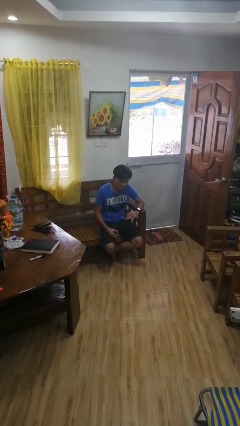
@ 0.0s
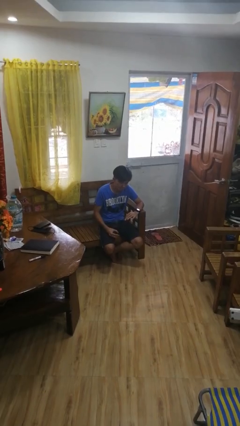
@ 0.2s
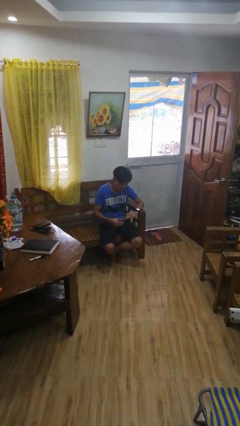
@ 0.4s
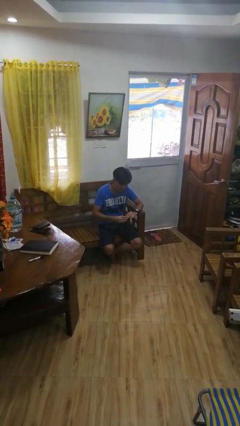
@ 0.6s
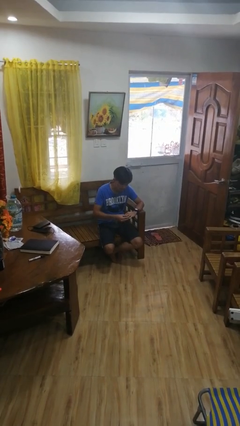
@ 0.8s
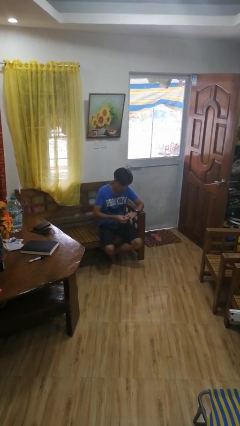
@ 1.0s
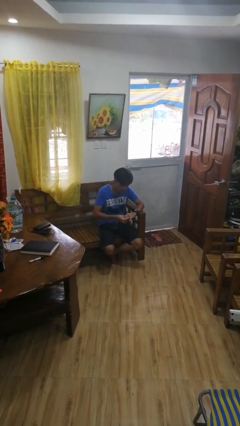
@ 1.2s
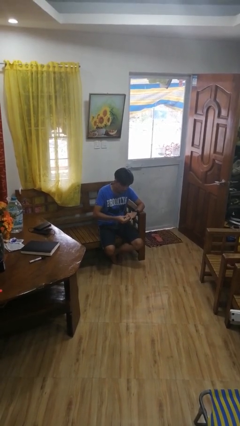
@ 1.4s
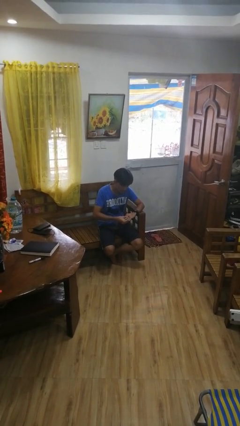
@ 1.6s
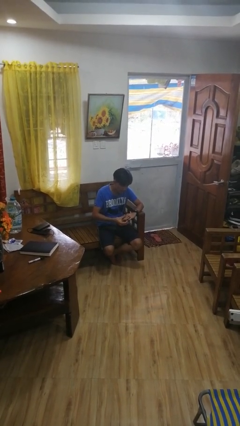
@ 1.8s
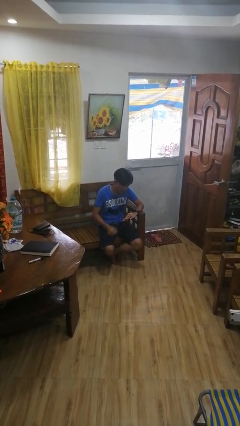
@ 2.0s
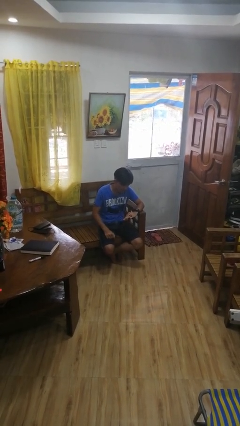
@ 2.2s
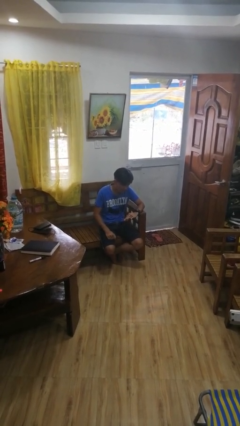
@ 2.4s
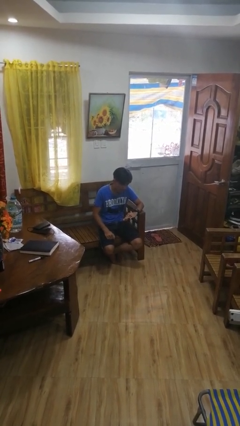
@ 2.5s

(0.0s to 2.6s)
person puts on ring

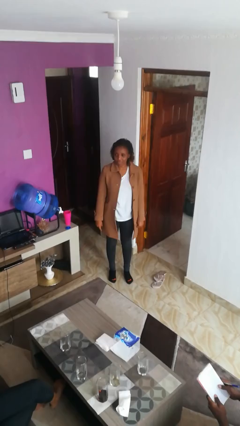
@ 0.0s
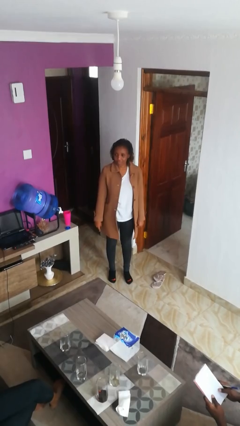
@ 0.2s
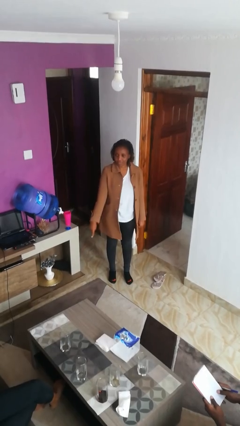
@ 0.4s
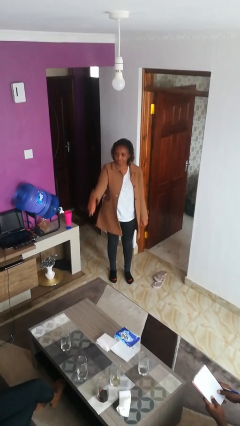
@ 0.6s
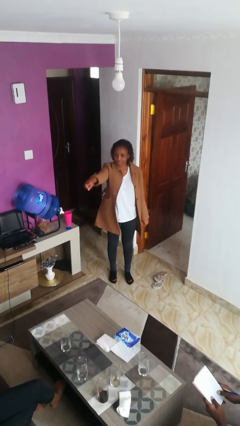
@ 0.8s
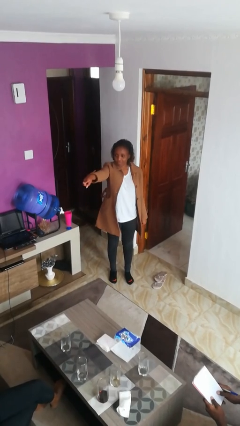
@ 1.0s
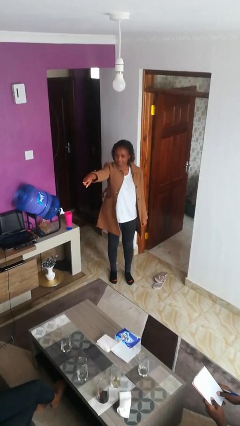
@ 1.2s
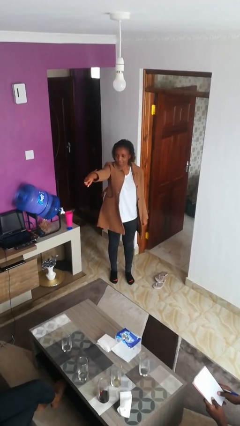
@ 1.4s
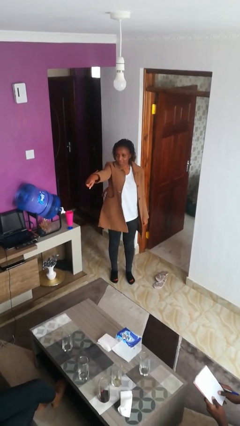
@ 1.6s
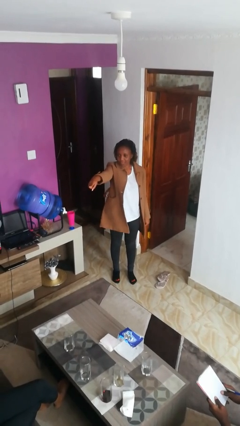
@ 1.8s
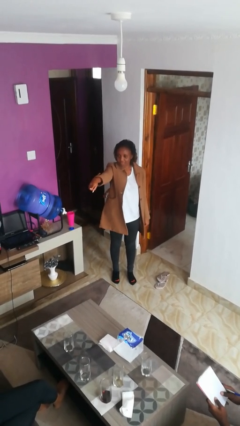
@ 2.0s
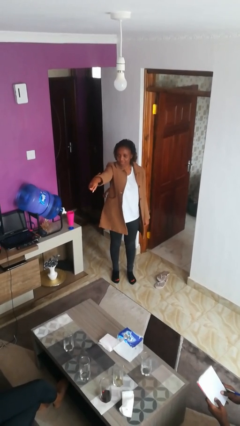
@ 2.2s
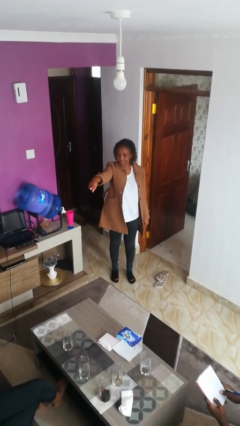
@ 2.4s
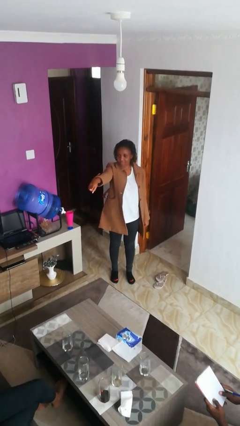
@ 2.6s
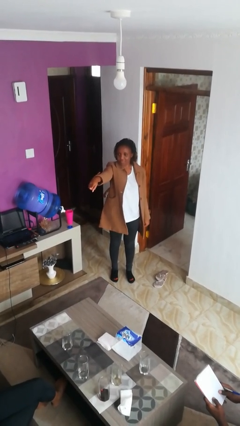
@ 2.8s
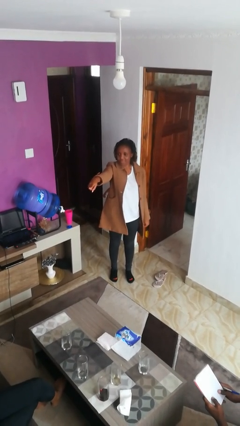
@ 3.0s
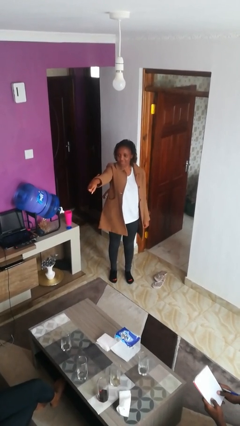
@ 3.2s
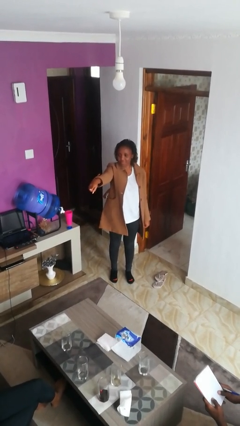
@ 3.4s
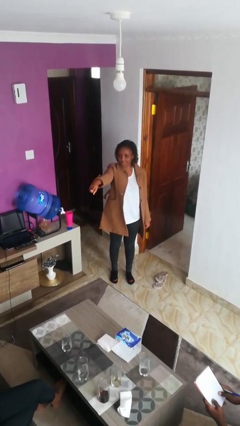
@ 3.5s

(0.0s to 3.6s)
person points at person

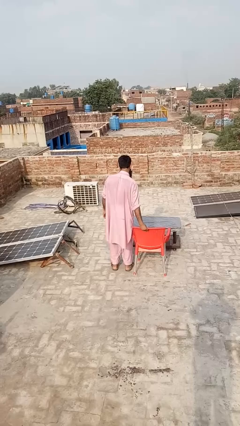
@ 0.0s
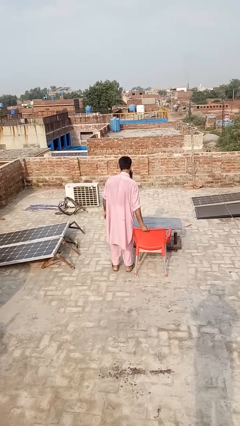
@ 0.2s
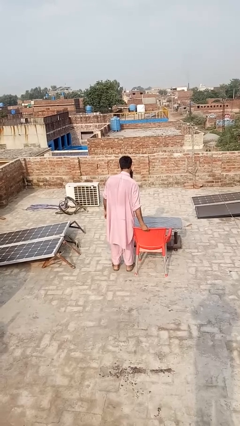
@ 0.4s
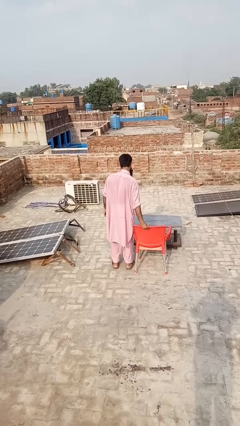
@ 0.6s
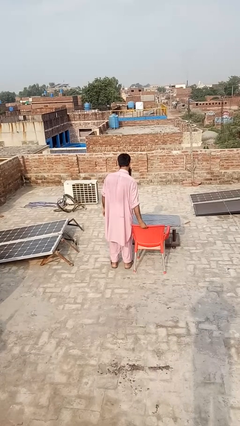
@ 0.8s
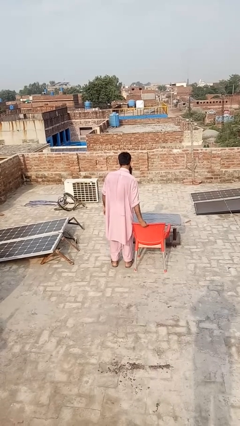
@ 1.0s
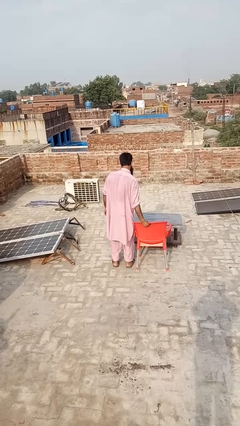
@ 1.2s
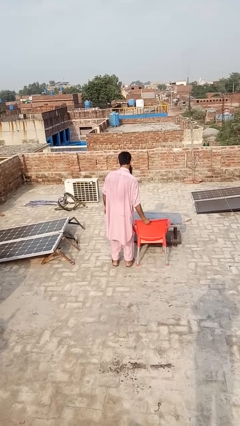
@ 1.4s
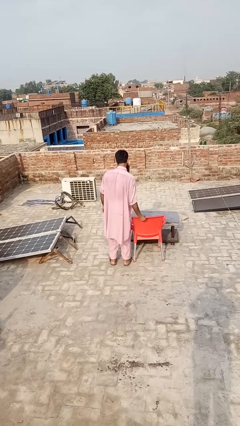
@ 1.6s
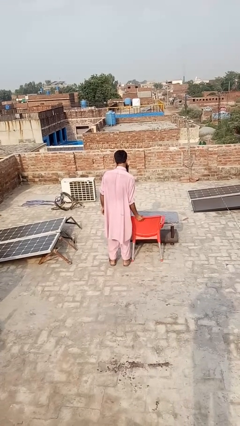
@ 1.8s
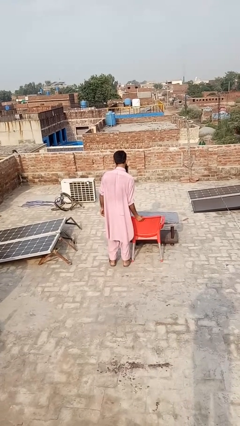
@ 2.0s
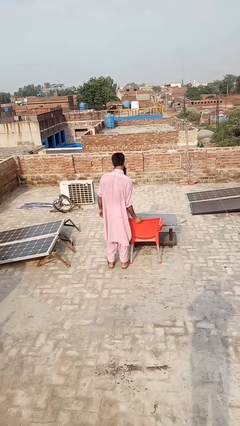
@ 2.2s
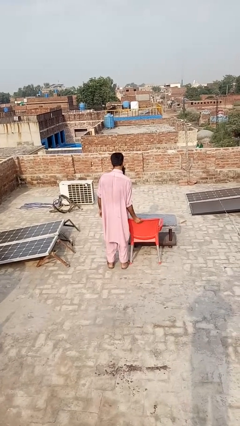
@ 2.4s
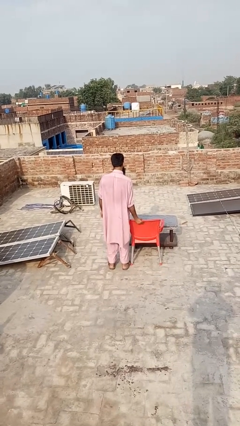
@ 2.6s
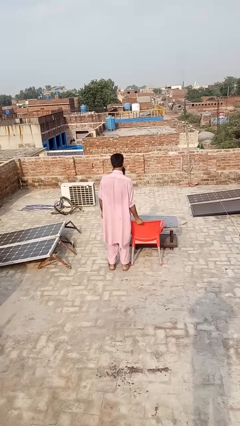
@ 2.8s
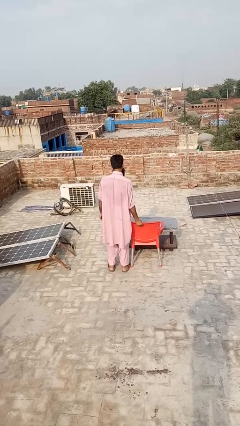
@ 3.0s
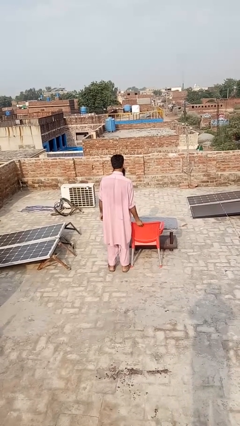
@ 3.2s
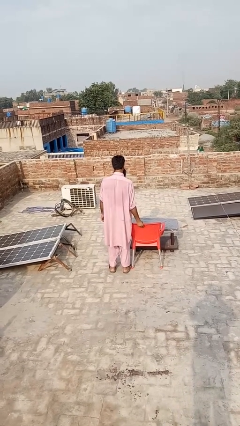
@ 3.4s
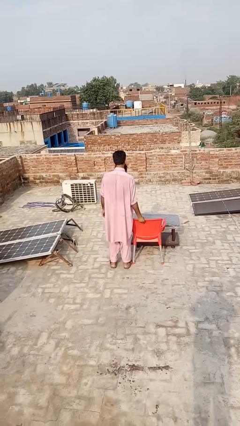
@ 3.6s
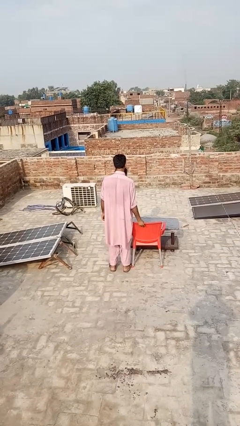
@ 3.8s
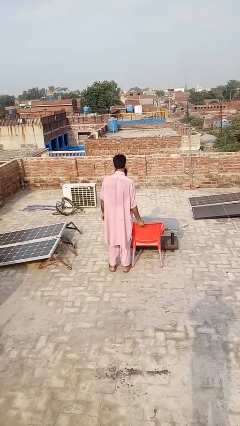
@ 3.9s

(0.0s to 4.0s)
person pushes in chair

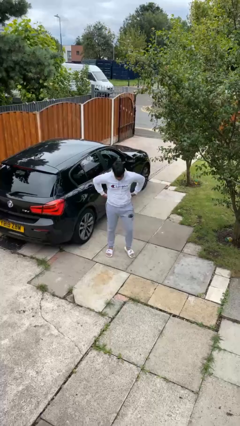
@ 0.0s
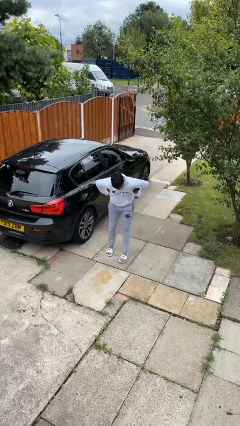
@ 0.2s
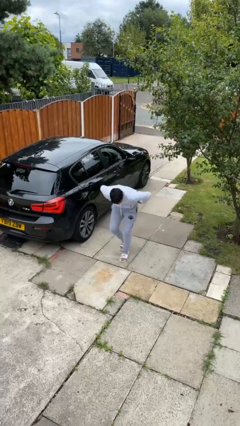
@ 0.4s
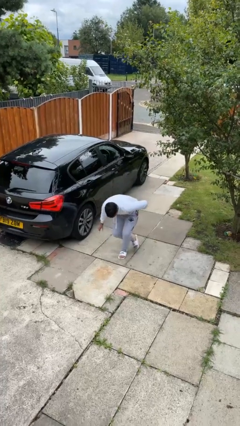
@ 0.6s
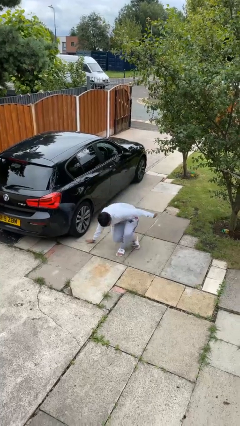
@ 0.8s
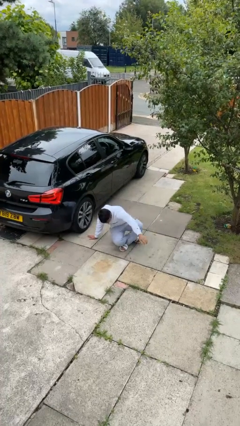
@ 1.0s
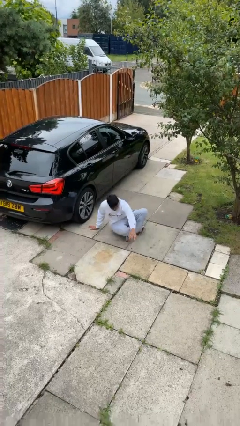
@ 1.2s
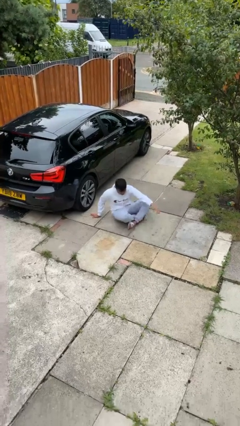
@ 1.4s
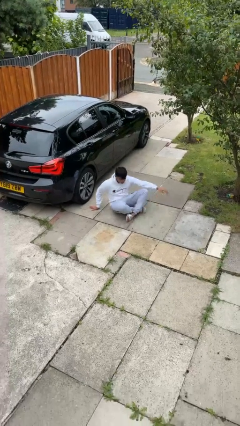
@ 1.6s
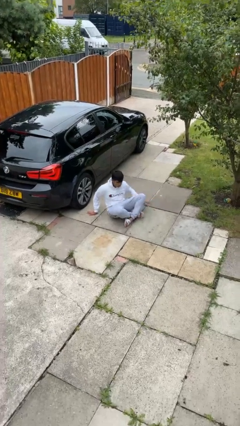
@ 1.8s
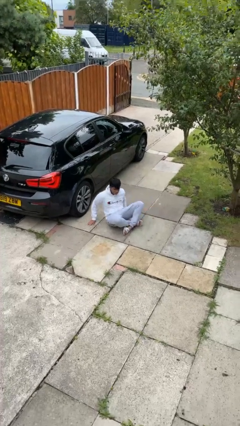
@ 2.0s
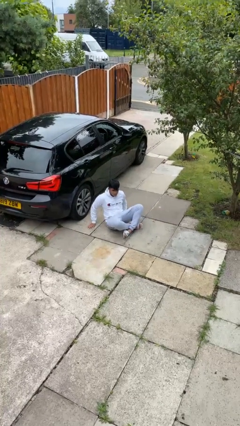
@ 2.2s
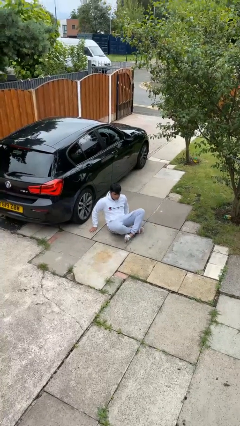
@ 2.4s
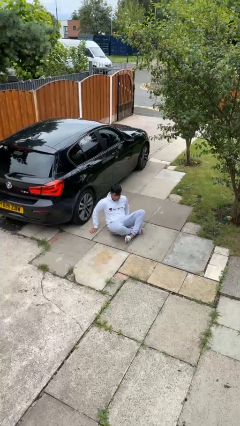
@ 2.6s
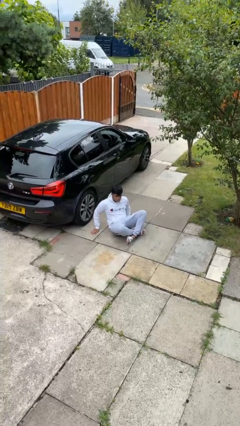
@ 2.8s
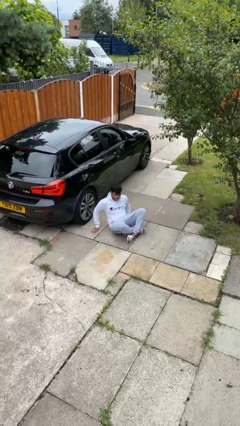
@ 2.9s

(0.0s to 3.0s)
person sits crisscross

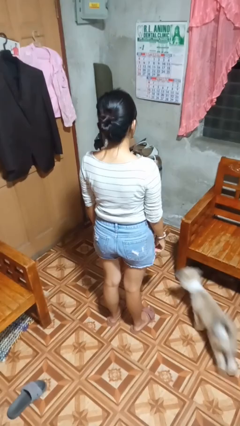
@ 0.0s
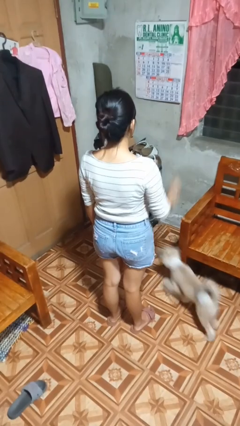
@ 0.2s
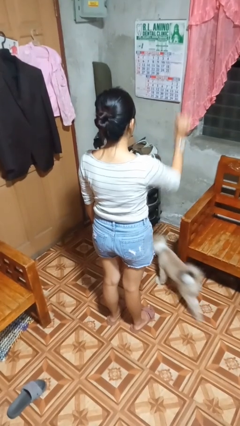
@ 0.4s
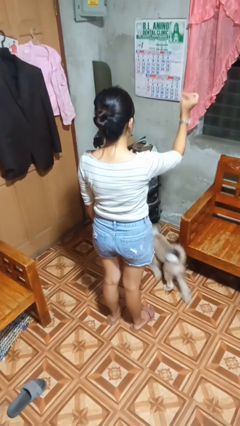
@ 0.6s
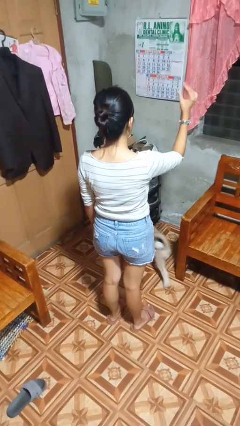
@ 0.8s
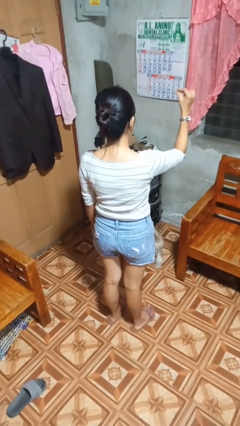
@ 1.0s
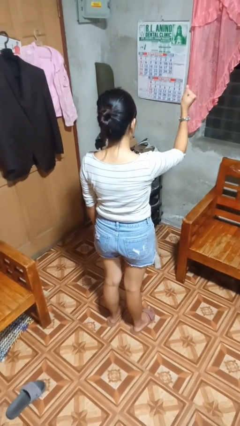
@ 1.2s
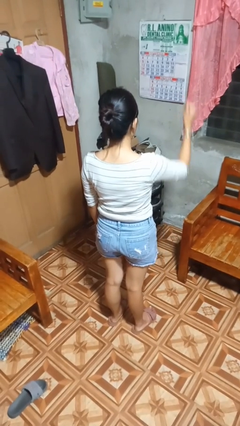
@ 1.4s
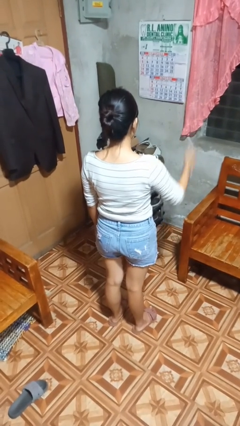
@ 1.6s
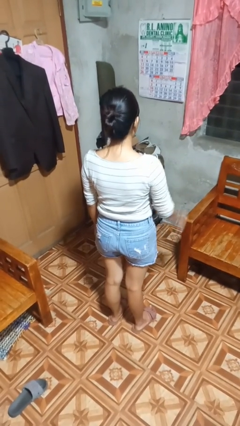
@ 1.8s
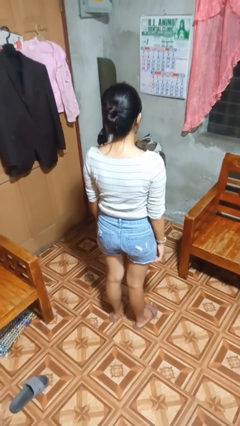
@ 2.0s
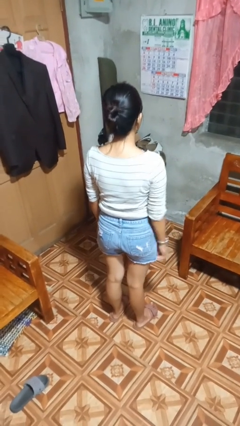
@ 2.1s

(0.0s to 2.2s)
person snaps fingers

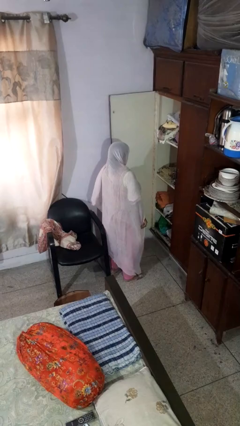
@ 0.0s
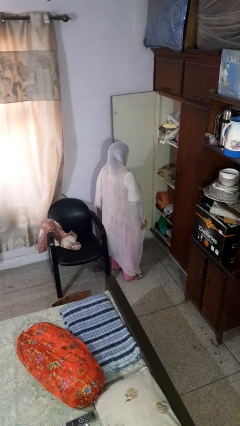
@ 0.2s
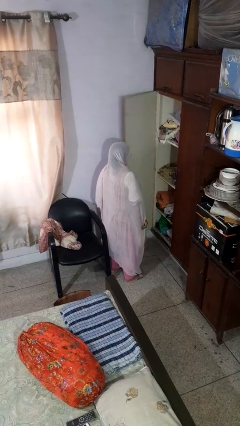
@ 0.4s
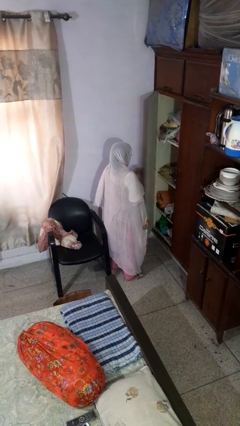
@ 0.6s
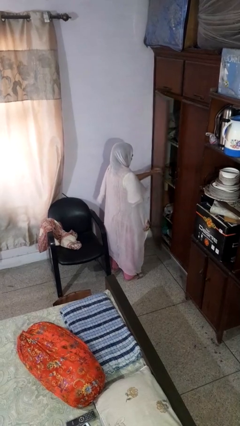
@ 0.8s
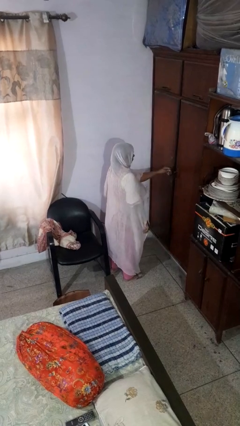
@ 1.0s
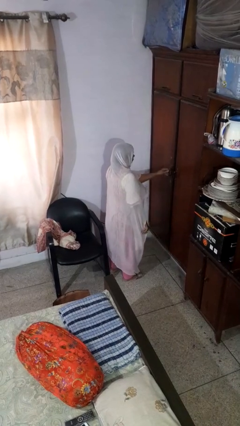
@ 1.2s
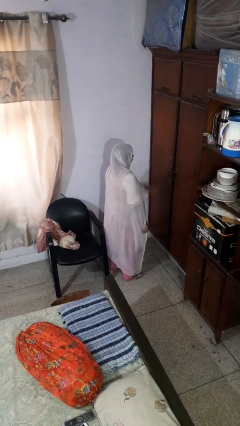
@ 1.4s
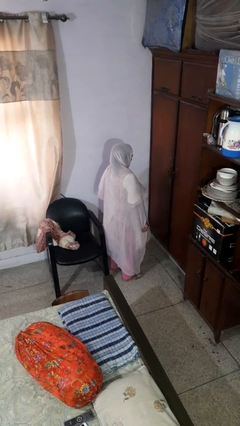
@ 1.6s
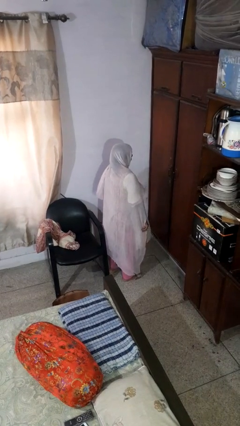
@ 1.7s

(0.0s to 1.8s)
person closes closet door
